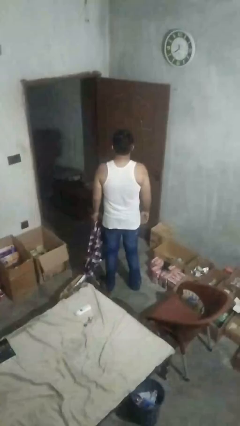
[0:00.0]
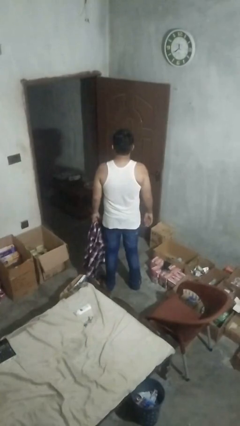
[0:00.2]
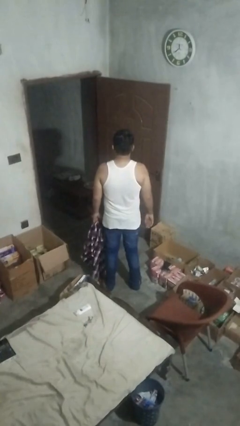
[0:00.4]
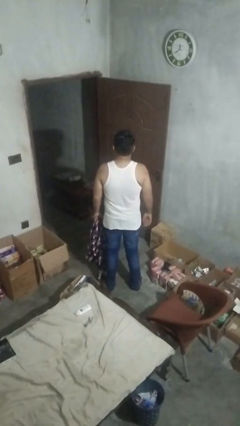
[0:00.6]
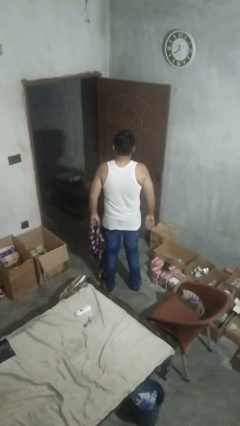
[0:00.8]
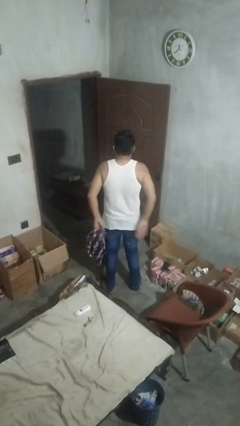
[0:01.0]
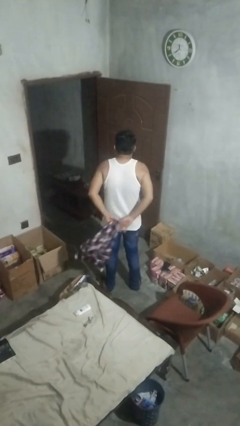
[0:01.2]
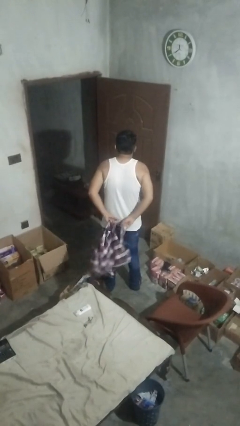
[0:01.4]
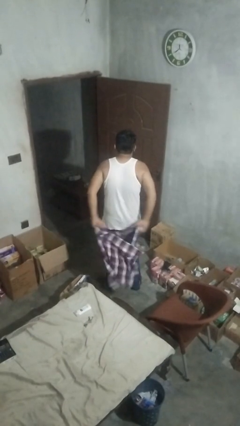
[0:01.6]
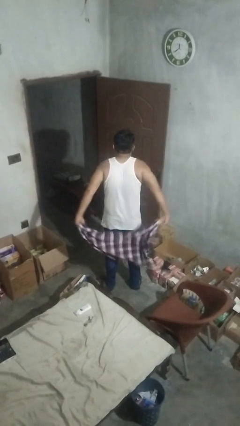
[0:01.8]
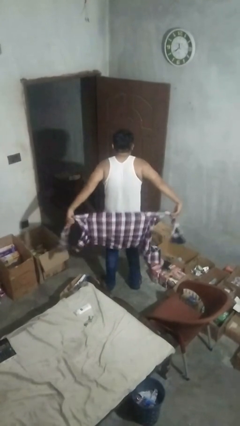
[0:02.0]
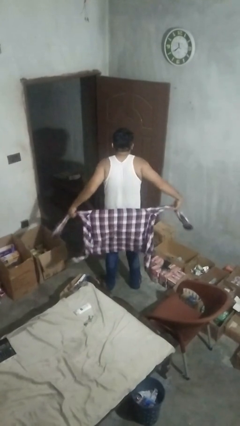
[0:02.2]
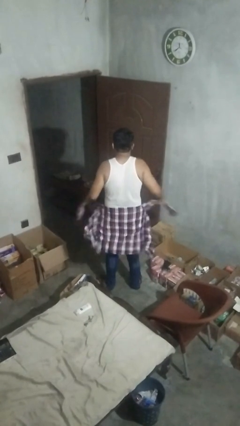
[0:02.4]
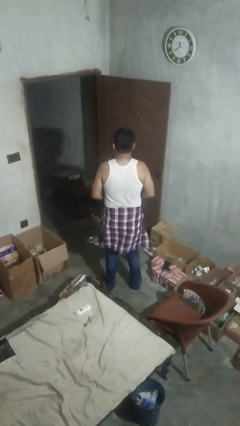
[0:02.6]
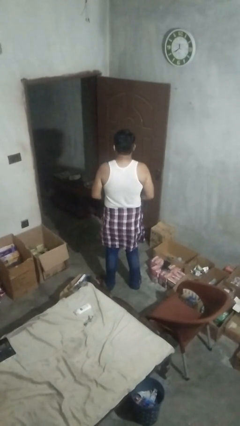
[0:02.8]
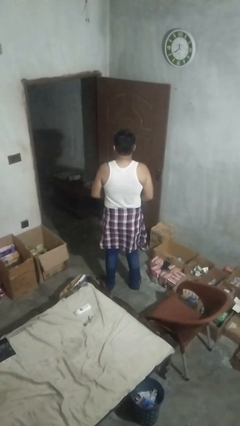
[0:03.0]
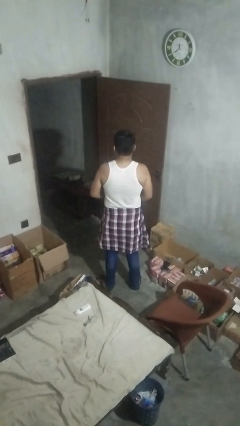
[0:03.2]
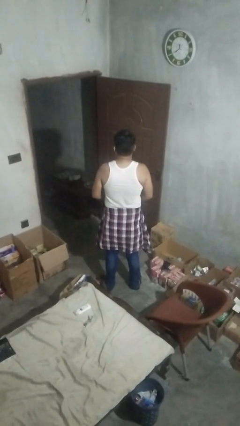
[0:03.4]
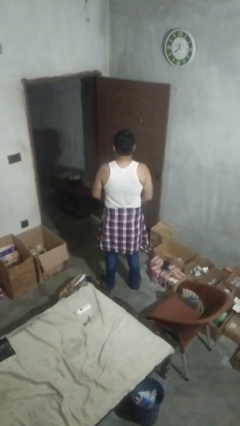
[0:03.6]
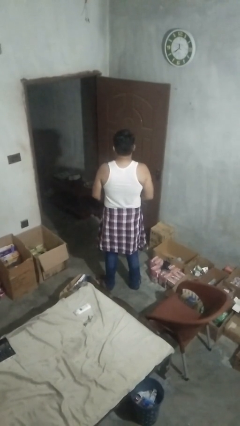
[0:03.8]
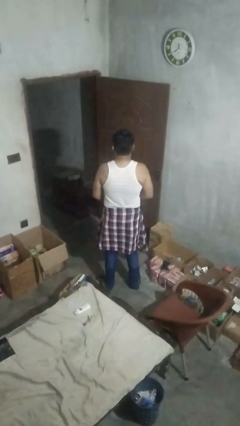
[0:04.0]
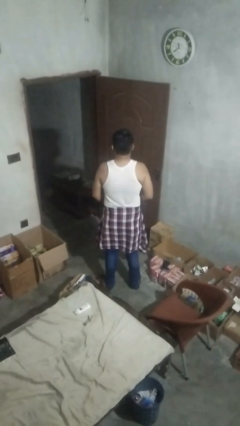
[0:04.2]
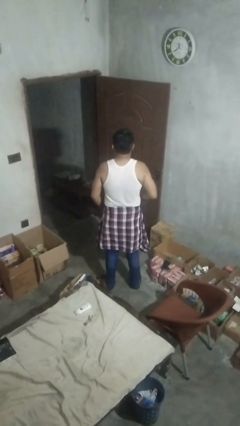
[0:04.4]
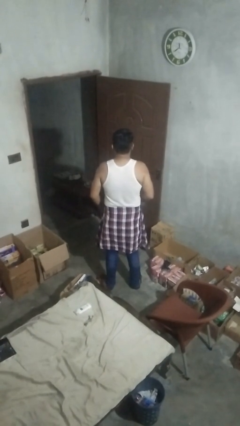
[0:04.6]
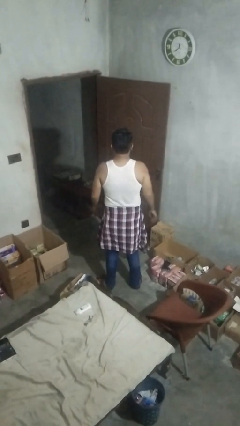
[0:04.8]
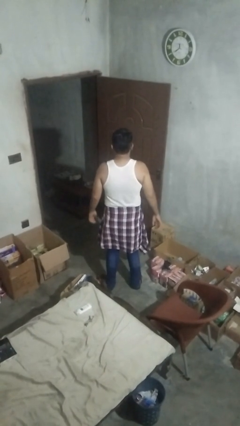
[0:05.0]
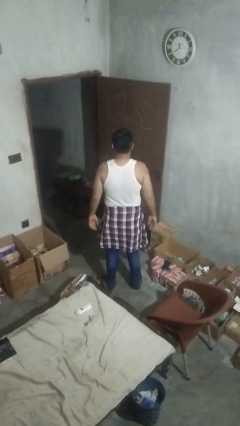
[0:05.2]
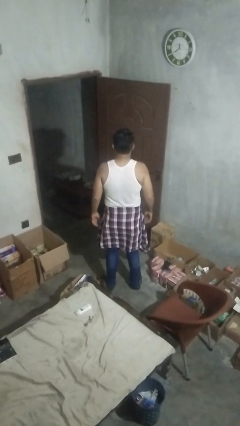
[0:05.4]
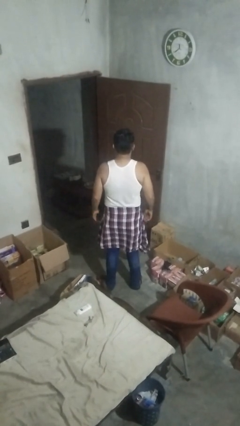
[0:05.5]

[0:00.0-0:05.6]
person ties jacket around waist

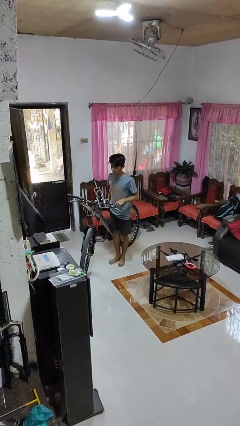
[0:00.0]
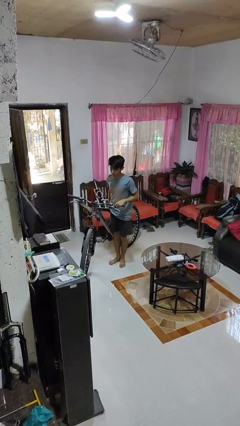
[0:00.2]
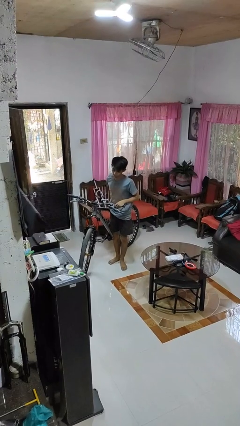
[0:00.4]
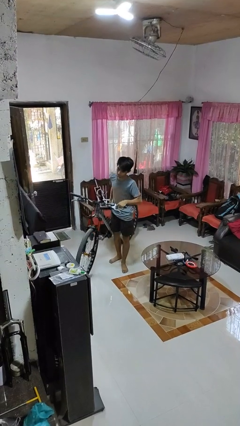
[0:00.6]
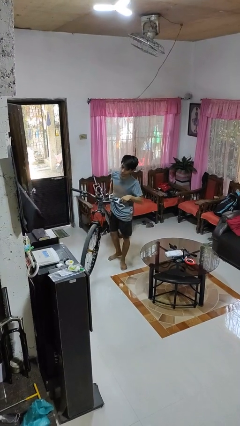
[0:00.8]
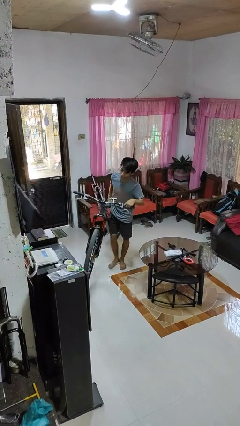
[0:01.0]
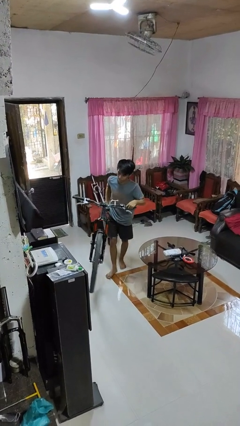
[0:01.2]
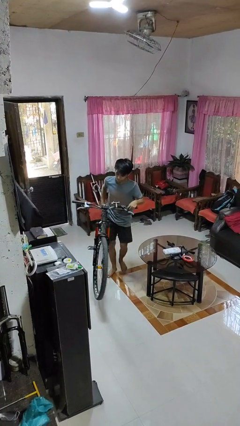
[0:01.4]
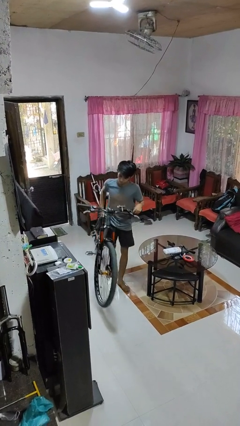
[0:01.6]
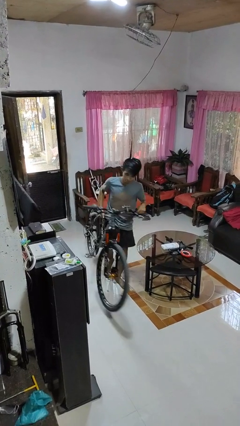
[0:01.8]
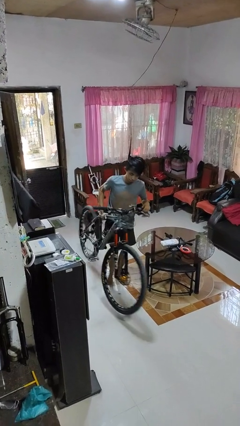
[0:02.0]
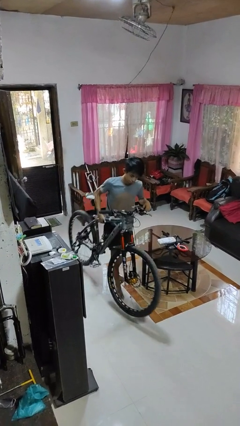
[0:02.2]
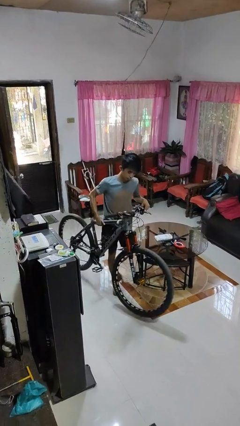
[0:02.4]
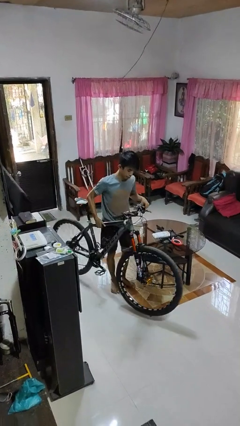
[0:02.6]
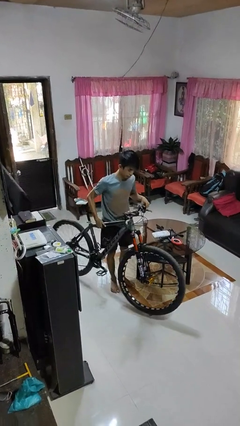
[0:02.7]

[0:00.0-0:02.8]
person carries bicycle

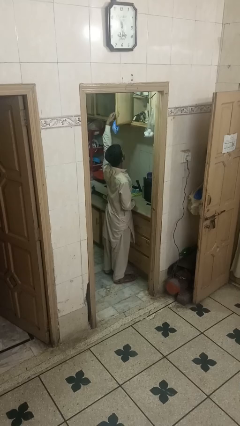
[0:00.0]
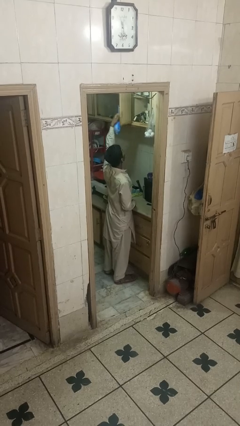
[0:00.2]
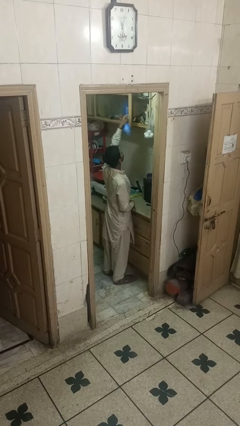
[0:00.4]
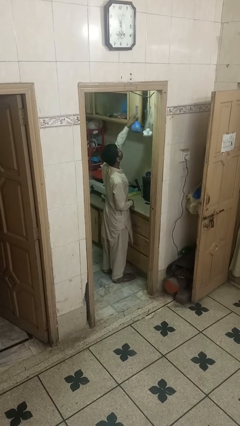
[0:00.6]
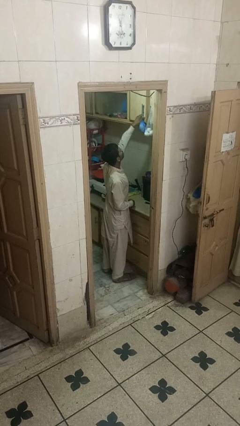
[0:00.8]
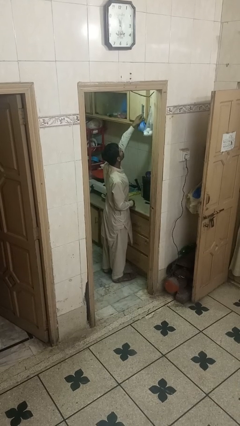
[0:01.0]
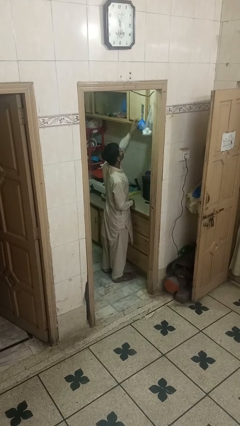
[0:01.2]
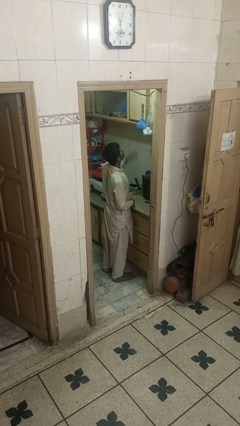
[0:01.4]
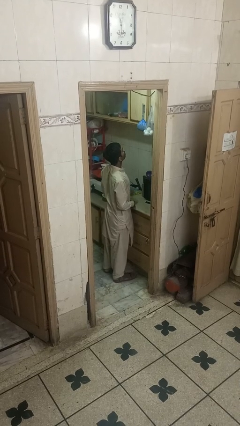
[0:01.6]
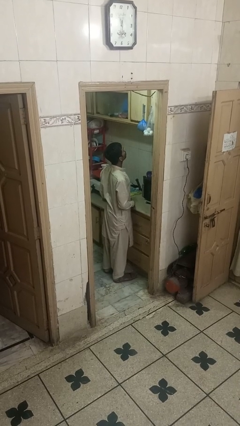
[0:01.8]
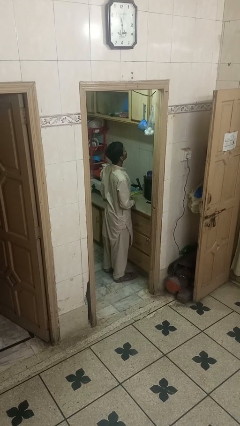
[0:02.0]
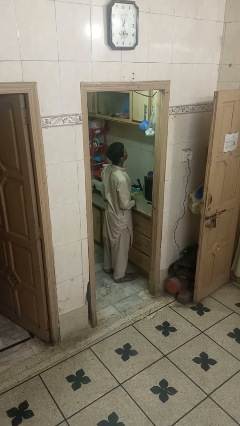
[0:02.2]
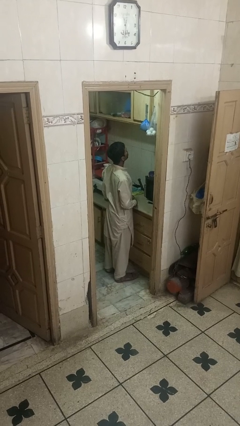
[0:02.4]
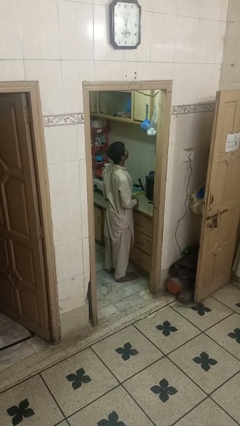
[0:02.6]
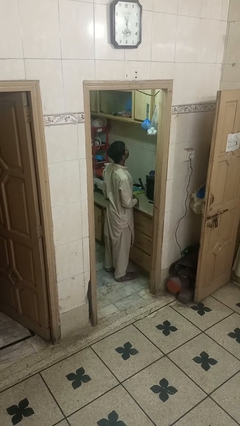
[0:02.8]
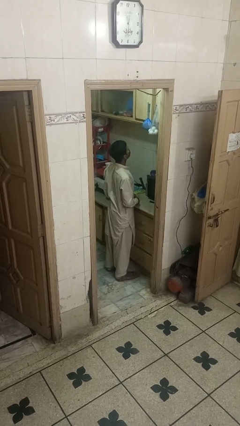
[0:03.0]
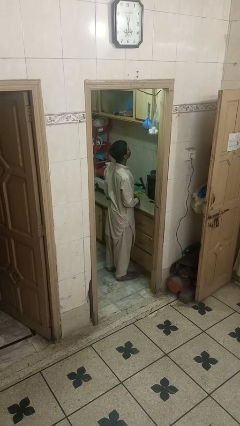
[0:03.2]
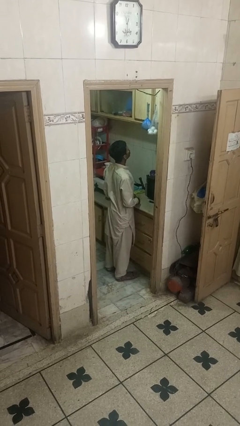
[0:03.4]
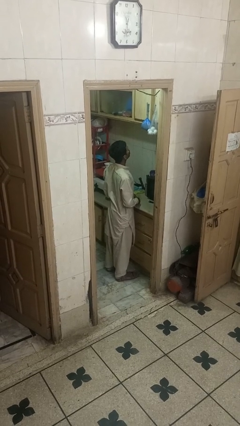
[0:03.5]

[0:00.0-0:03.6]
person closes cabinet

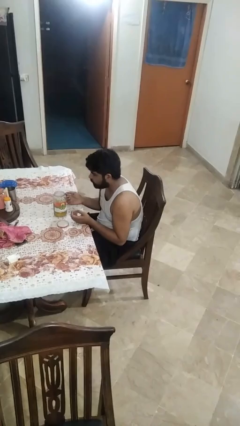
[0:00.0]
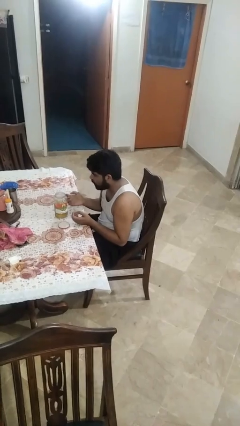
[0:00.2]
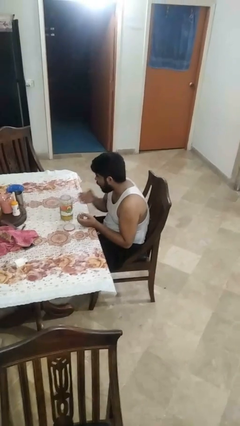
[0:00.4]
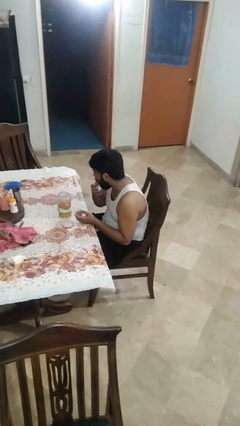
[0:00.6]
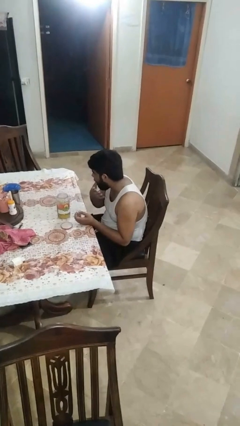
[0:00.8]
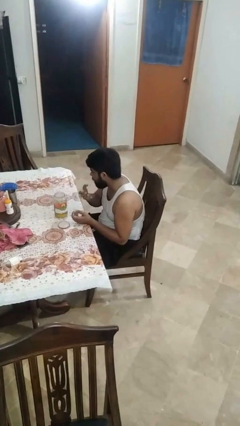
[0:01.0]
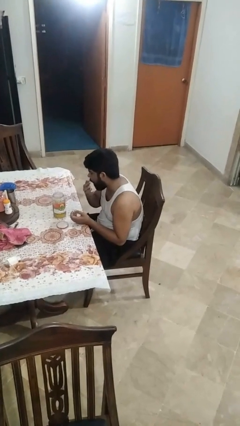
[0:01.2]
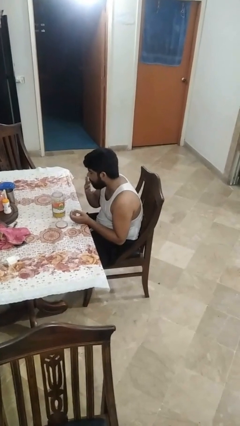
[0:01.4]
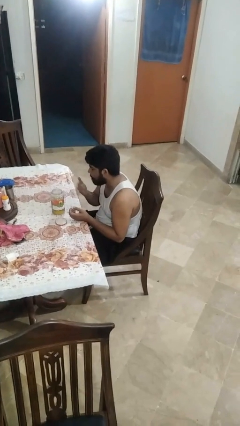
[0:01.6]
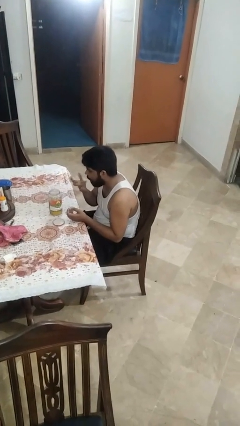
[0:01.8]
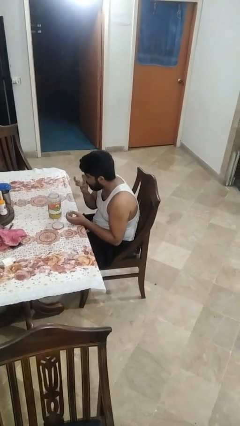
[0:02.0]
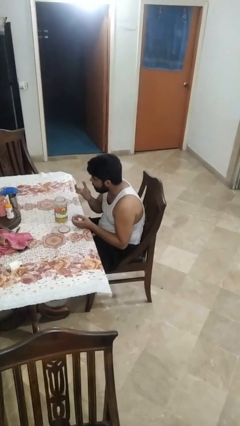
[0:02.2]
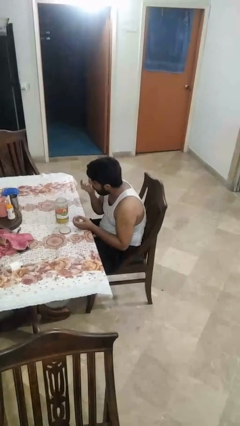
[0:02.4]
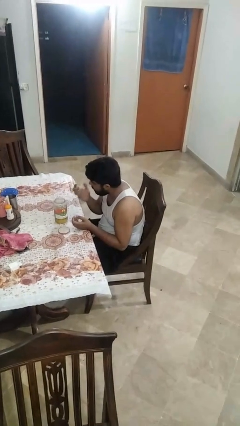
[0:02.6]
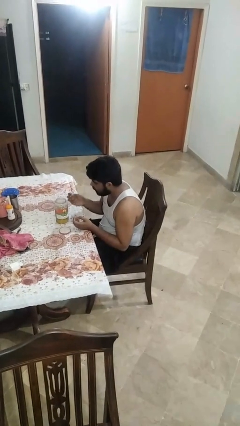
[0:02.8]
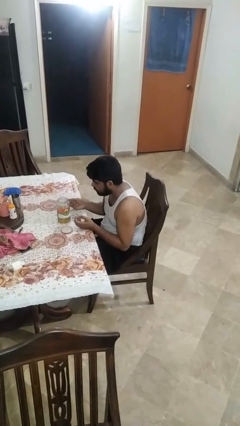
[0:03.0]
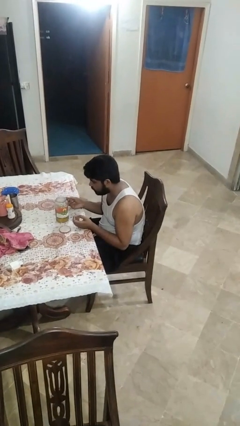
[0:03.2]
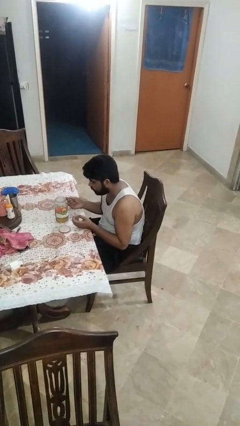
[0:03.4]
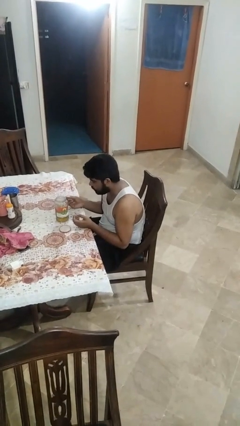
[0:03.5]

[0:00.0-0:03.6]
person licks fingers

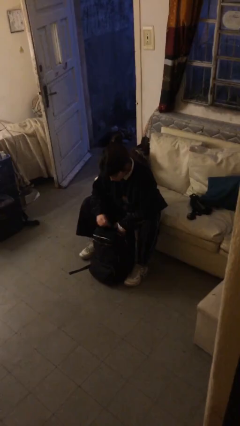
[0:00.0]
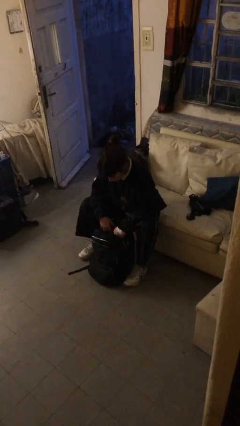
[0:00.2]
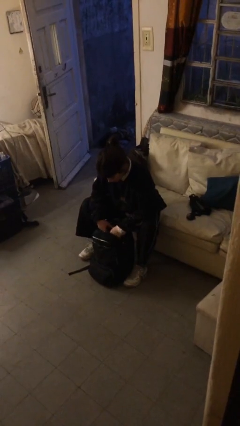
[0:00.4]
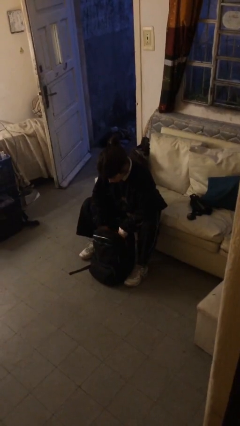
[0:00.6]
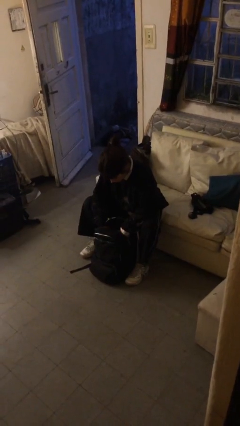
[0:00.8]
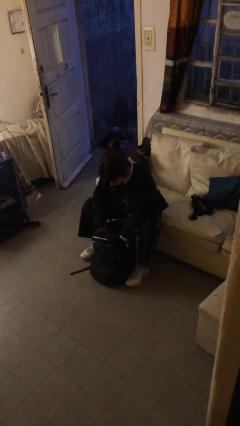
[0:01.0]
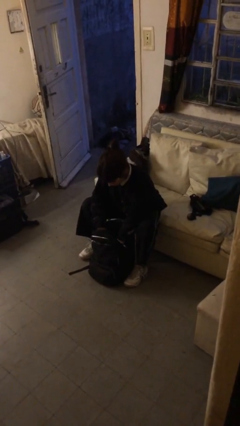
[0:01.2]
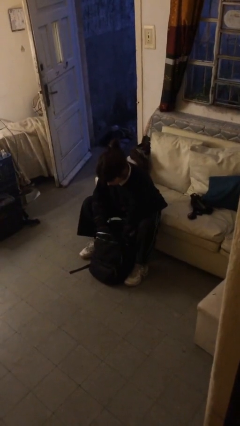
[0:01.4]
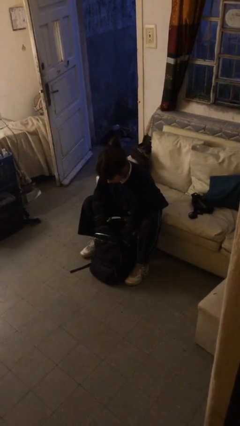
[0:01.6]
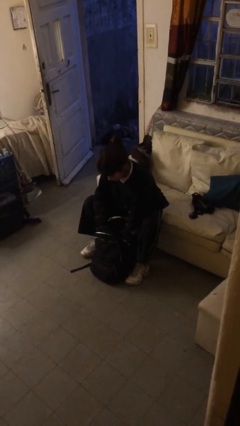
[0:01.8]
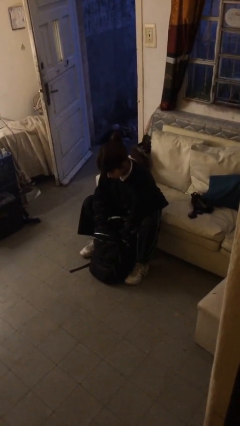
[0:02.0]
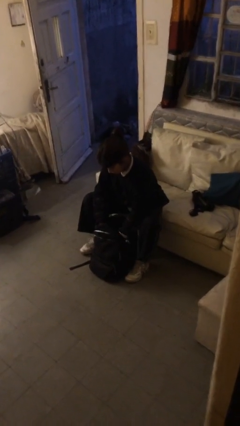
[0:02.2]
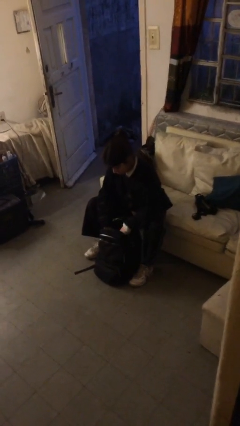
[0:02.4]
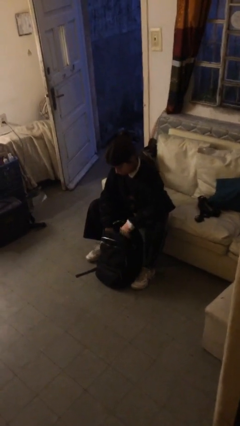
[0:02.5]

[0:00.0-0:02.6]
person searches in backpack
